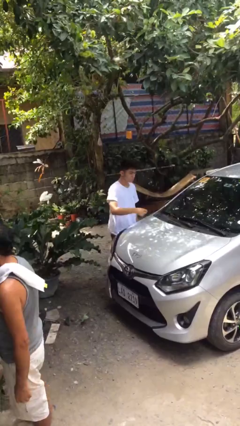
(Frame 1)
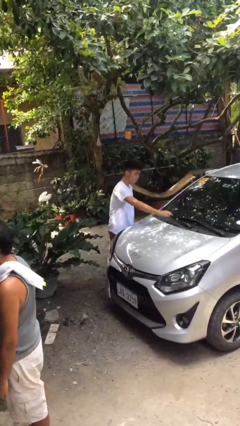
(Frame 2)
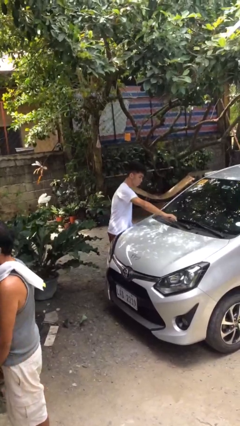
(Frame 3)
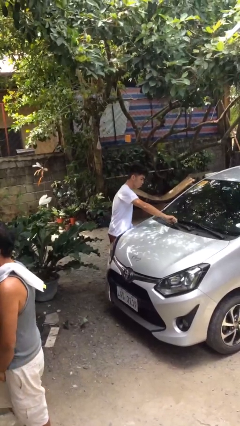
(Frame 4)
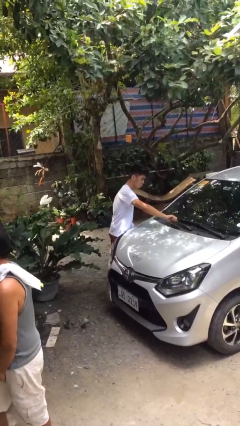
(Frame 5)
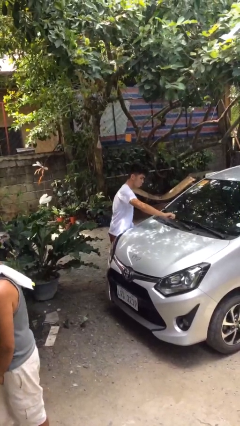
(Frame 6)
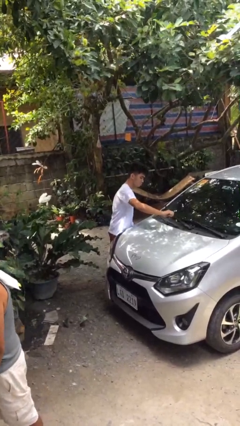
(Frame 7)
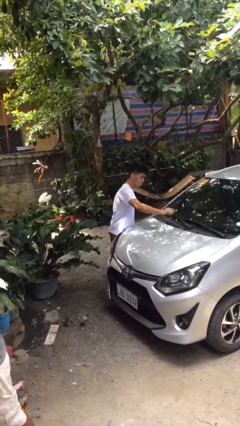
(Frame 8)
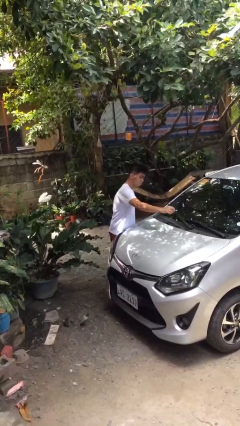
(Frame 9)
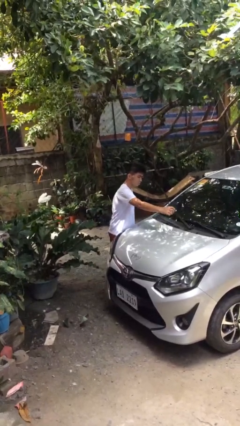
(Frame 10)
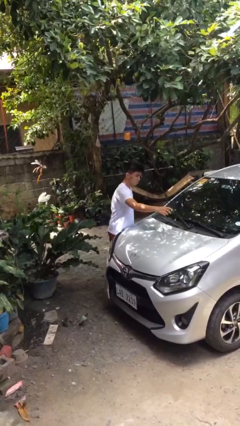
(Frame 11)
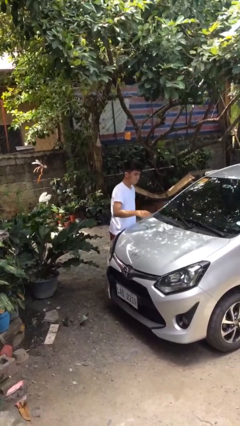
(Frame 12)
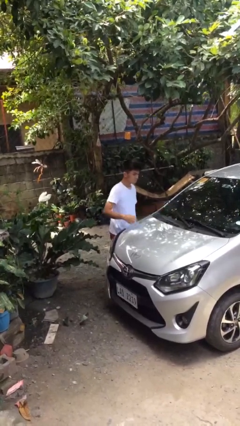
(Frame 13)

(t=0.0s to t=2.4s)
person flips up car wipers

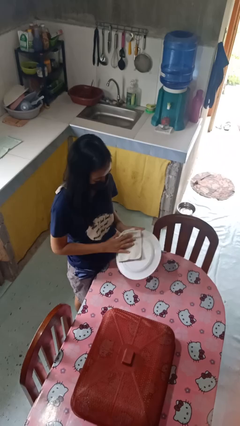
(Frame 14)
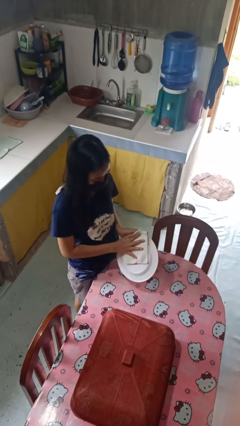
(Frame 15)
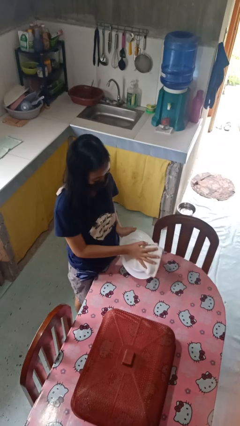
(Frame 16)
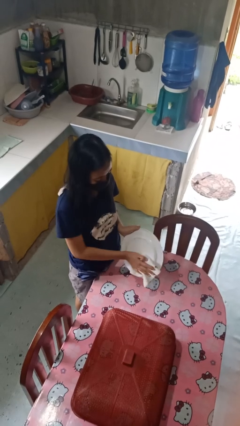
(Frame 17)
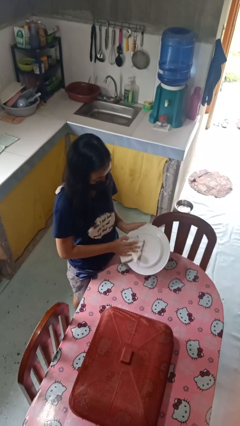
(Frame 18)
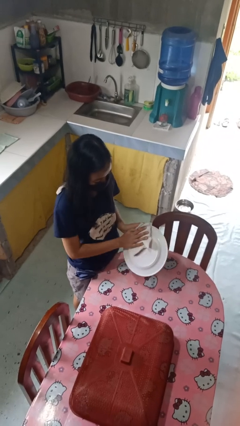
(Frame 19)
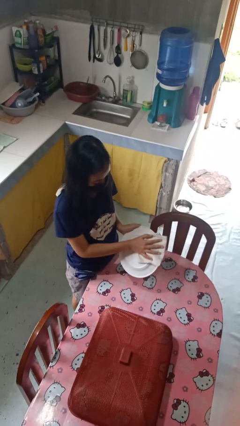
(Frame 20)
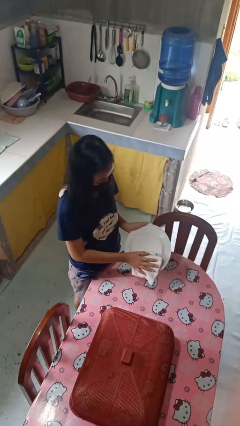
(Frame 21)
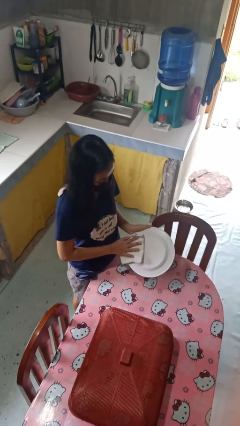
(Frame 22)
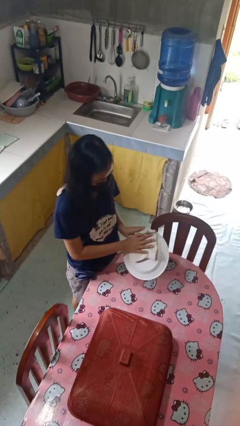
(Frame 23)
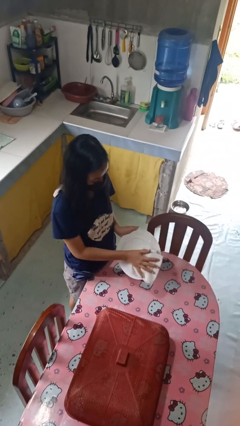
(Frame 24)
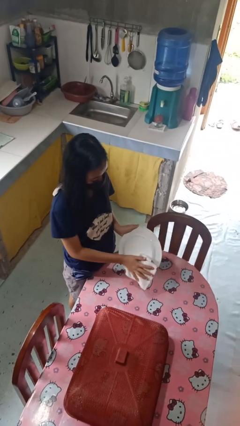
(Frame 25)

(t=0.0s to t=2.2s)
person dries dish

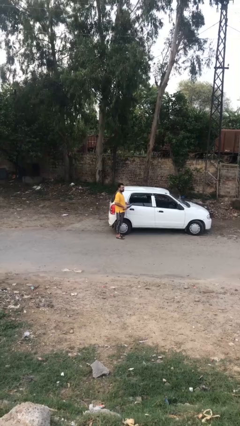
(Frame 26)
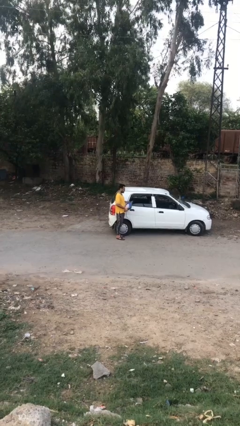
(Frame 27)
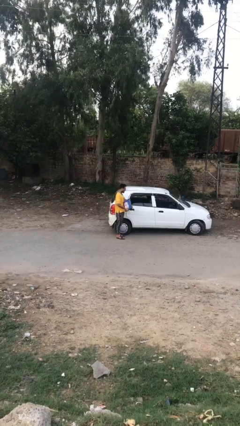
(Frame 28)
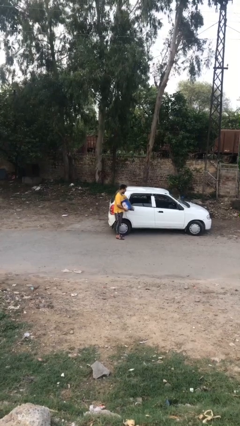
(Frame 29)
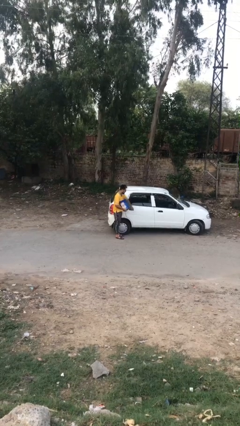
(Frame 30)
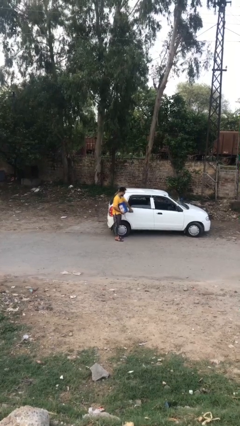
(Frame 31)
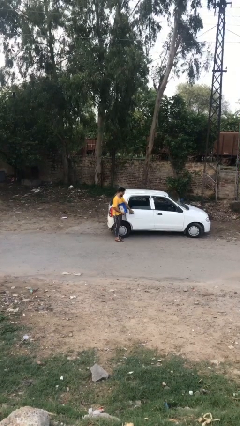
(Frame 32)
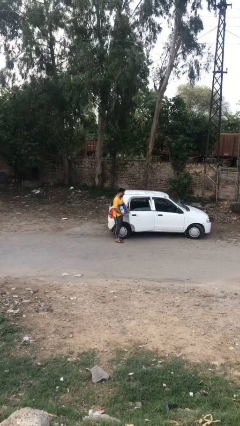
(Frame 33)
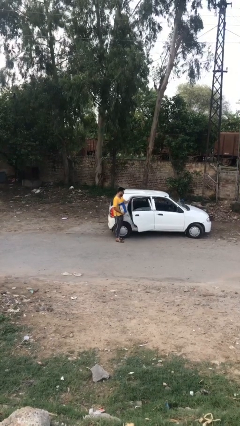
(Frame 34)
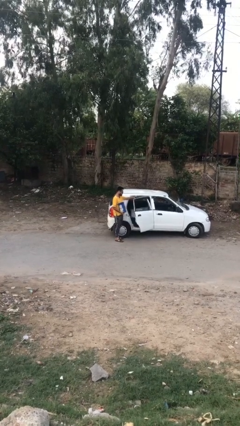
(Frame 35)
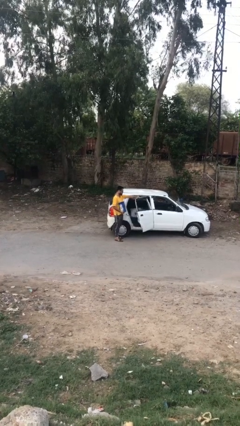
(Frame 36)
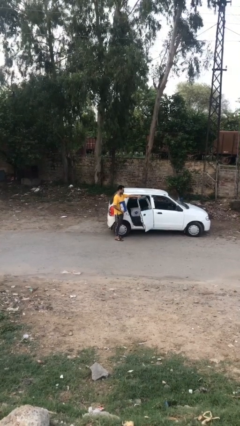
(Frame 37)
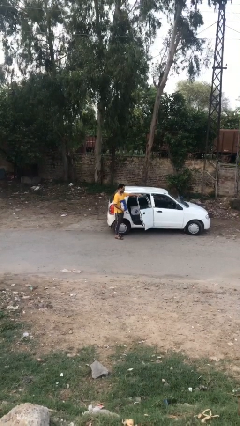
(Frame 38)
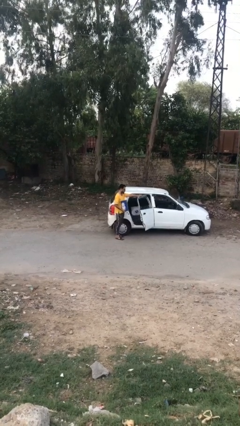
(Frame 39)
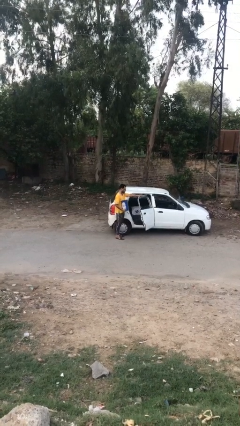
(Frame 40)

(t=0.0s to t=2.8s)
person opens car door

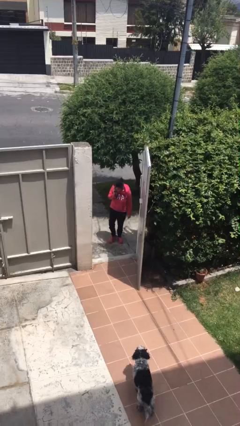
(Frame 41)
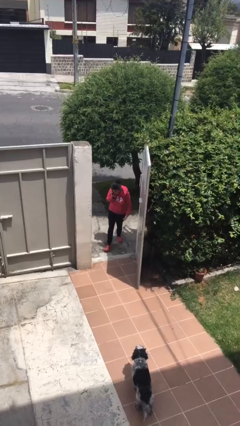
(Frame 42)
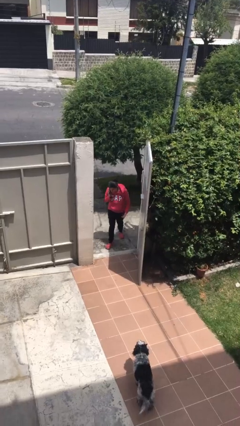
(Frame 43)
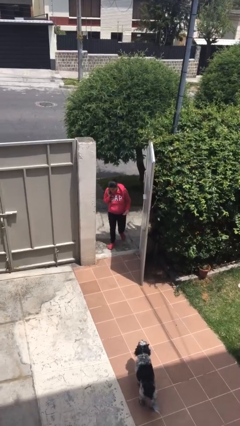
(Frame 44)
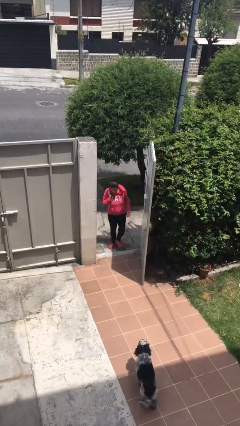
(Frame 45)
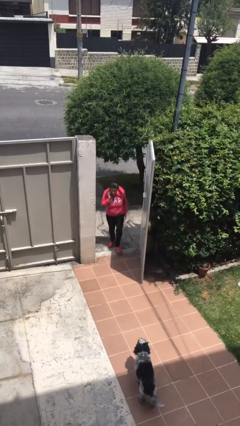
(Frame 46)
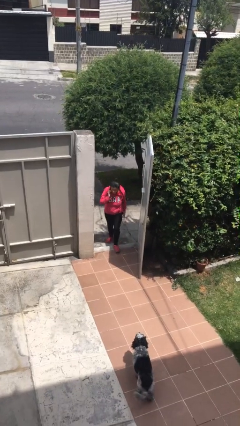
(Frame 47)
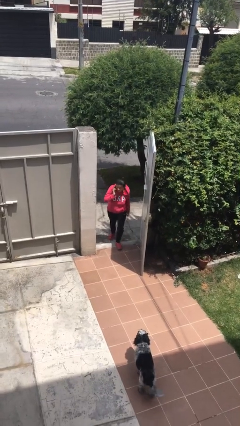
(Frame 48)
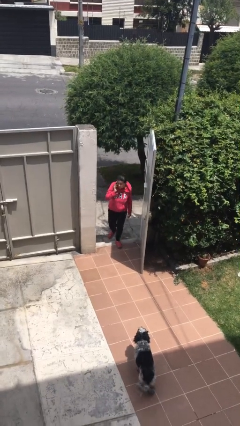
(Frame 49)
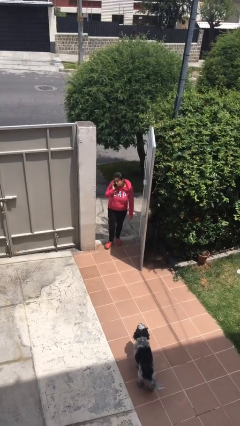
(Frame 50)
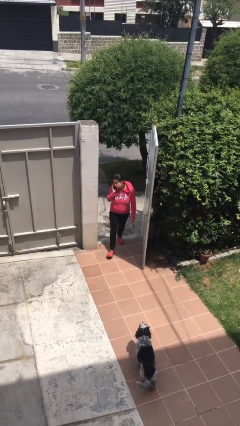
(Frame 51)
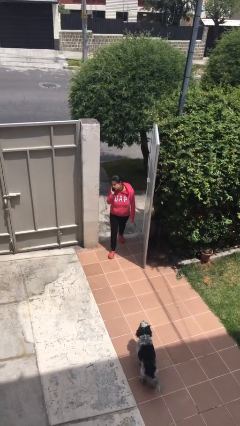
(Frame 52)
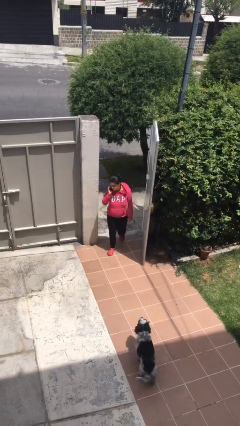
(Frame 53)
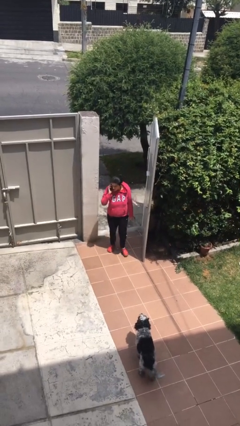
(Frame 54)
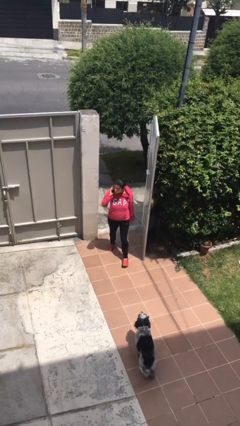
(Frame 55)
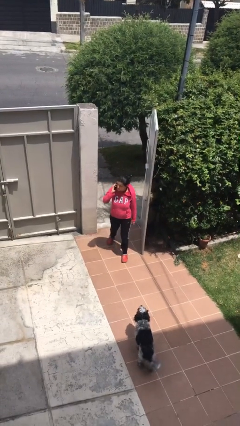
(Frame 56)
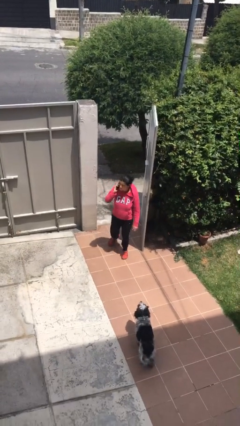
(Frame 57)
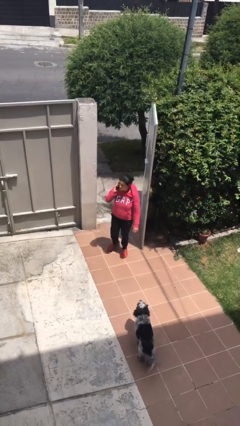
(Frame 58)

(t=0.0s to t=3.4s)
person enters scene through structure

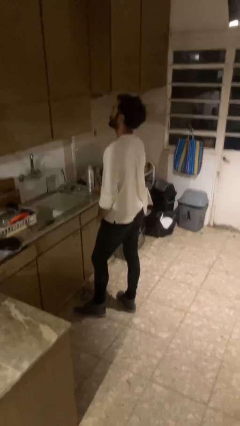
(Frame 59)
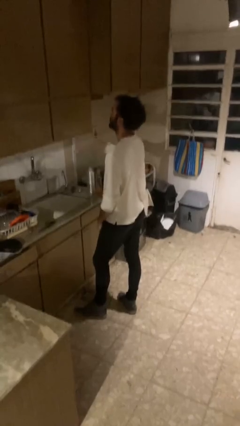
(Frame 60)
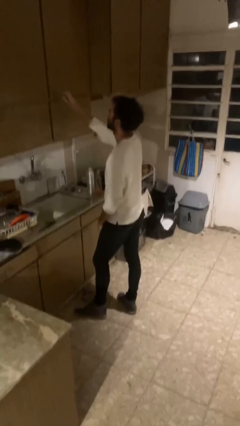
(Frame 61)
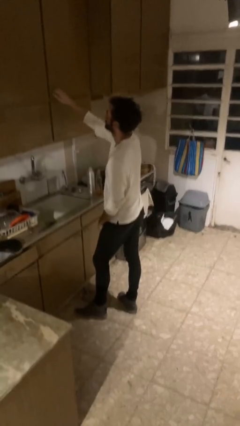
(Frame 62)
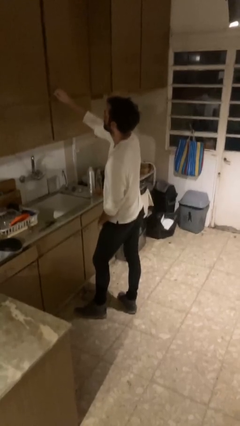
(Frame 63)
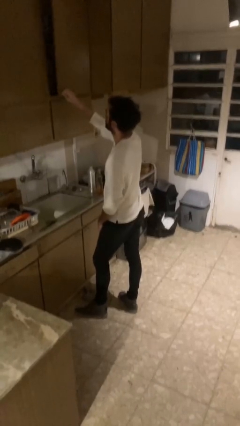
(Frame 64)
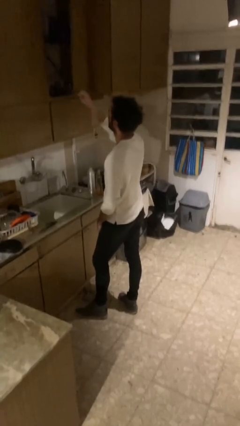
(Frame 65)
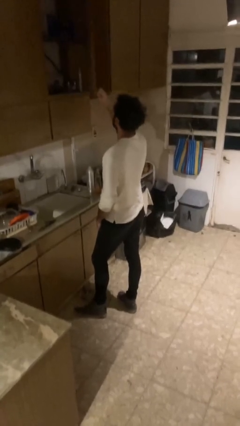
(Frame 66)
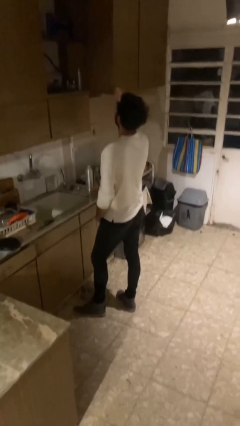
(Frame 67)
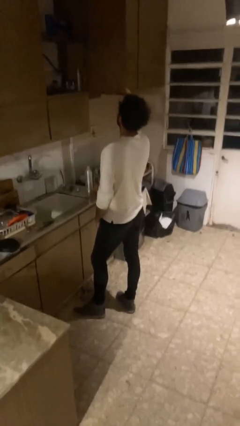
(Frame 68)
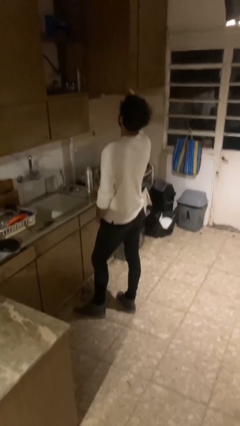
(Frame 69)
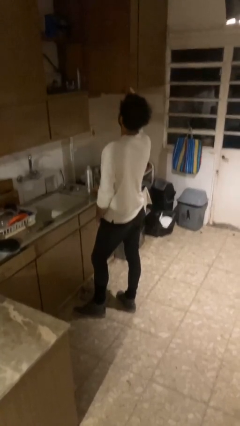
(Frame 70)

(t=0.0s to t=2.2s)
person closes cabinet

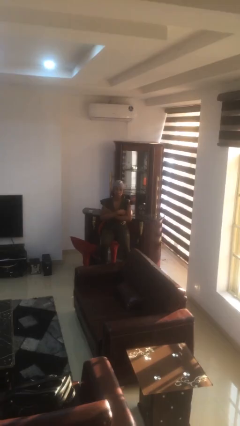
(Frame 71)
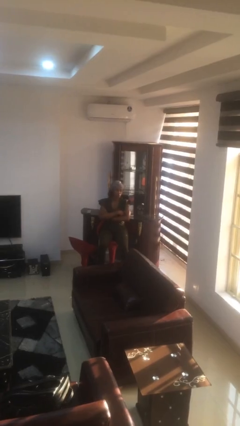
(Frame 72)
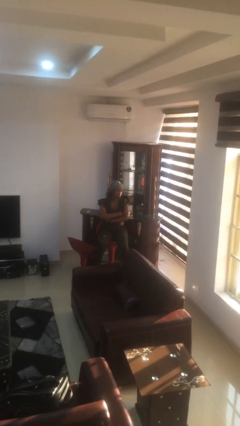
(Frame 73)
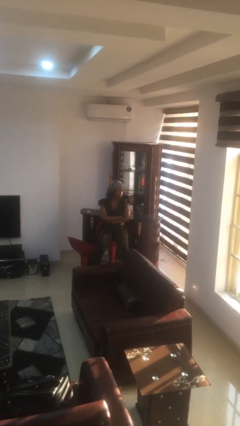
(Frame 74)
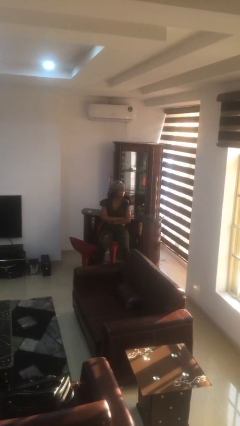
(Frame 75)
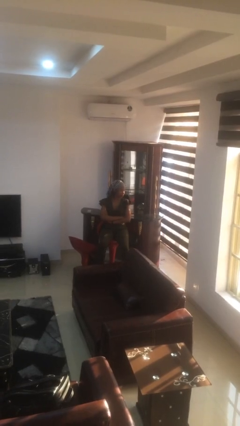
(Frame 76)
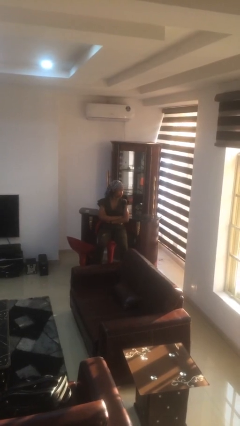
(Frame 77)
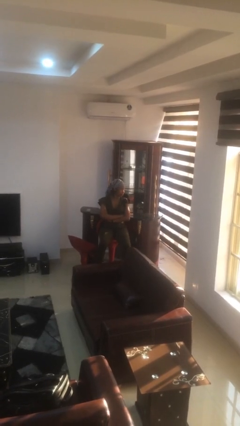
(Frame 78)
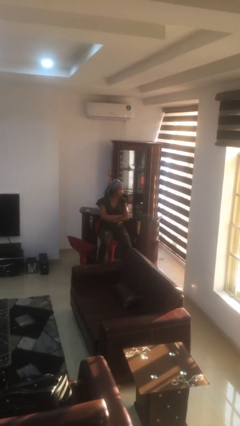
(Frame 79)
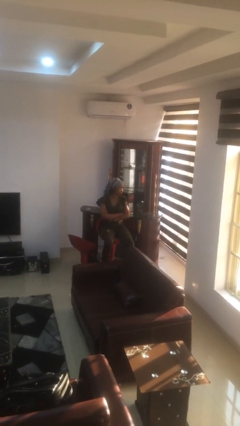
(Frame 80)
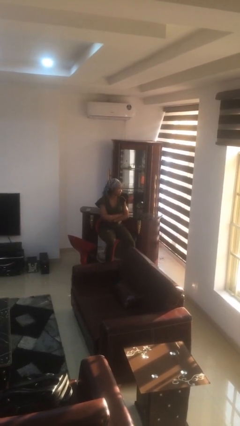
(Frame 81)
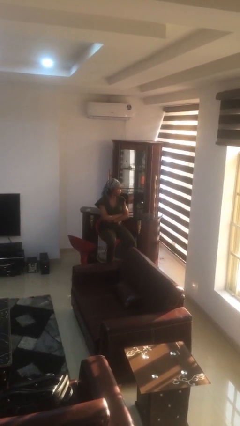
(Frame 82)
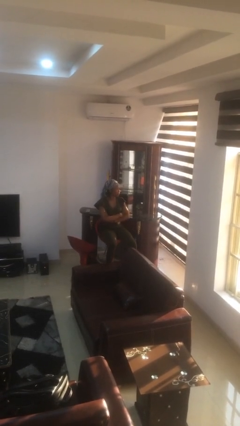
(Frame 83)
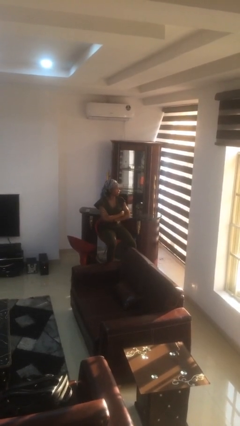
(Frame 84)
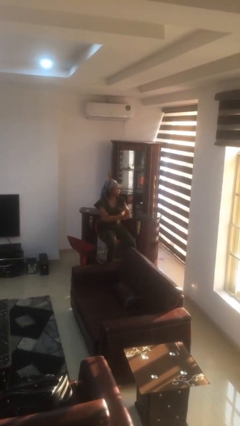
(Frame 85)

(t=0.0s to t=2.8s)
person crosses arms

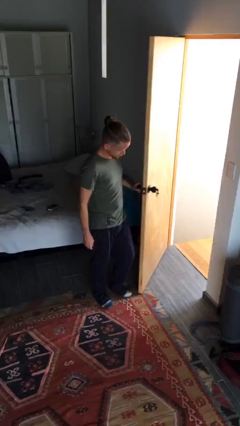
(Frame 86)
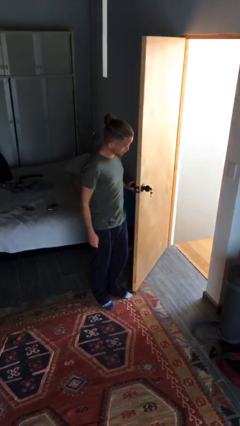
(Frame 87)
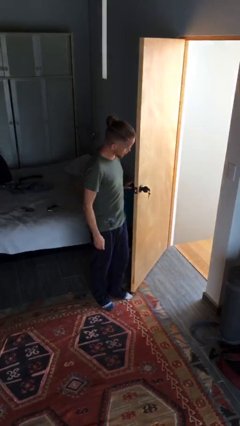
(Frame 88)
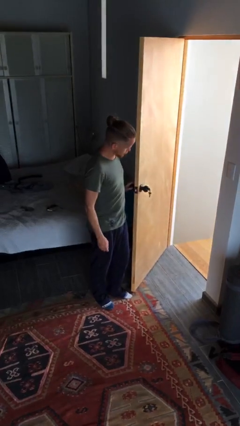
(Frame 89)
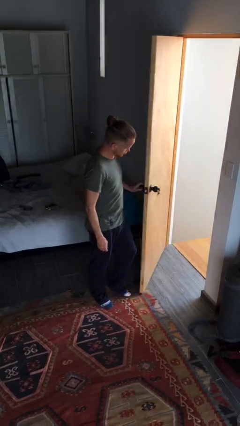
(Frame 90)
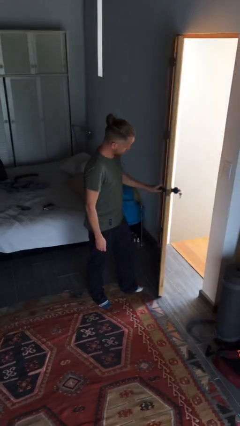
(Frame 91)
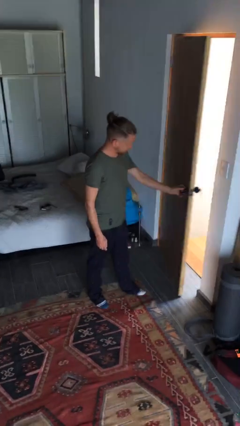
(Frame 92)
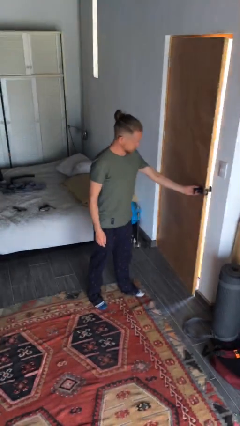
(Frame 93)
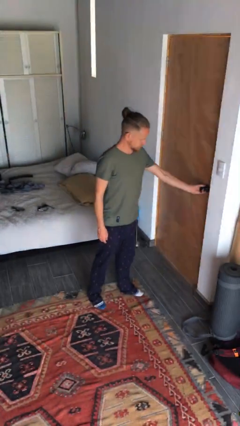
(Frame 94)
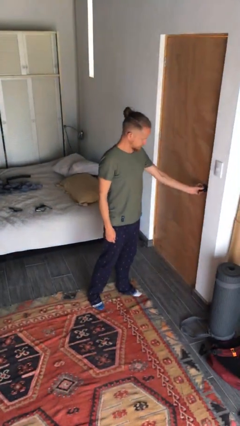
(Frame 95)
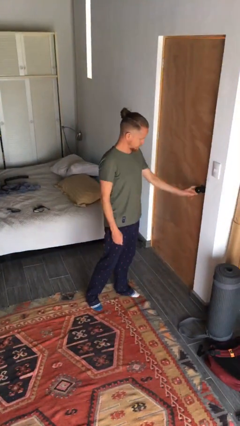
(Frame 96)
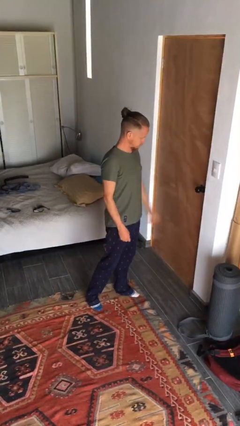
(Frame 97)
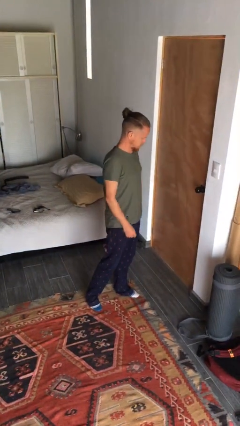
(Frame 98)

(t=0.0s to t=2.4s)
person closes facility door
